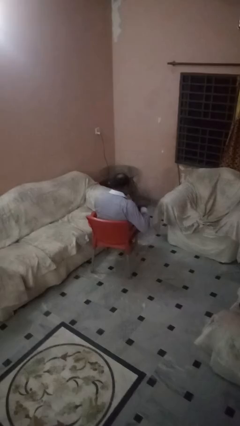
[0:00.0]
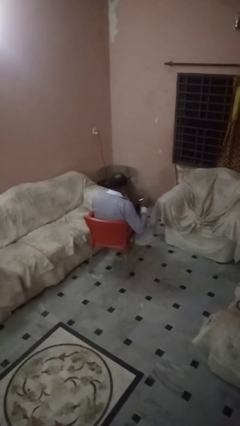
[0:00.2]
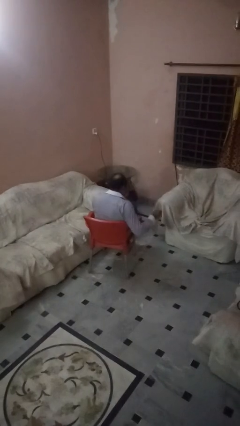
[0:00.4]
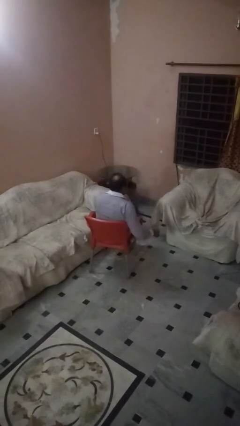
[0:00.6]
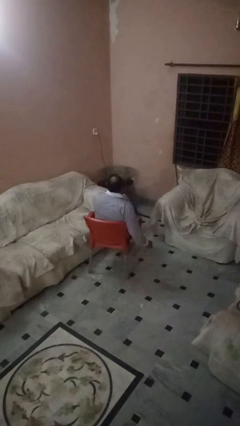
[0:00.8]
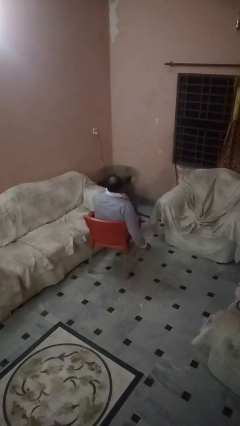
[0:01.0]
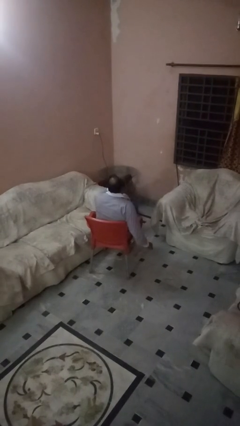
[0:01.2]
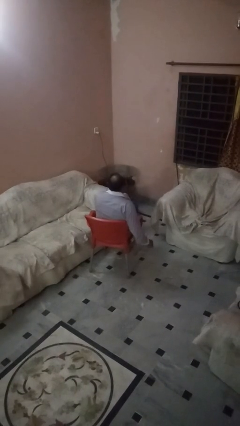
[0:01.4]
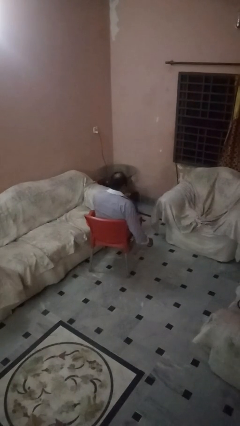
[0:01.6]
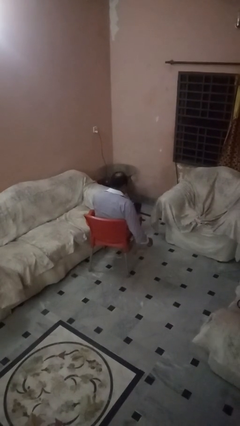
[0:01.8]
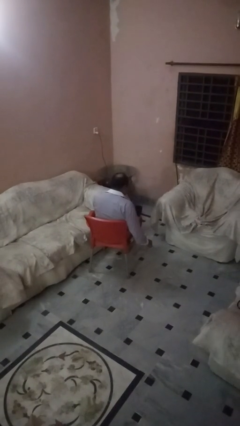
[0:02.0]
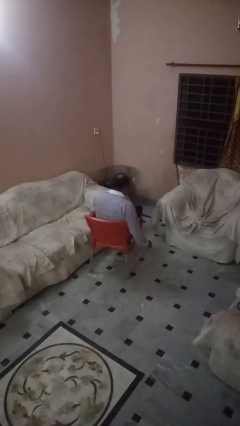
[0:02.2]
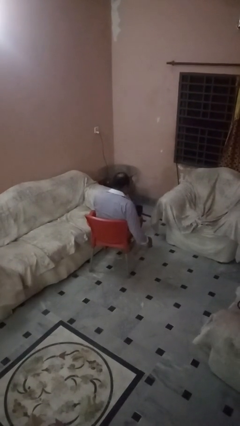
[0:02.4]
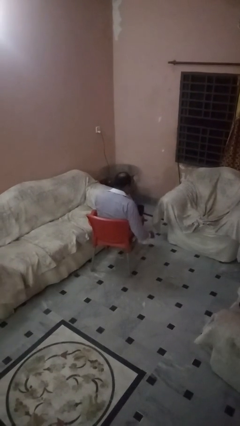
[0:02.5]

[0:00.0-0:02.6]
person drinks from mug

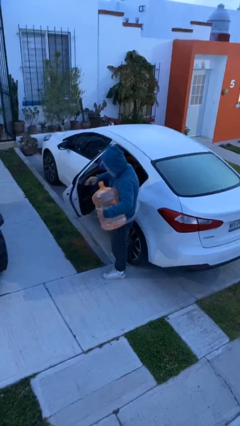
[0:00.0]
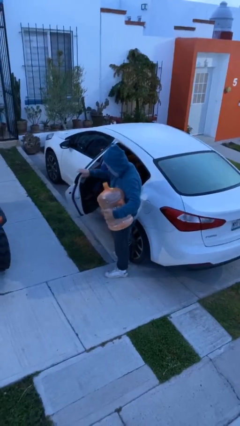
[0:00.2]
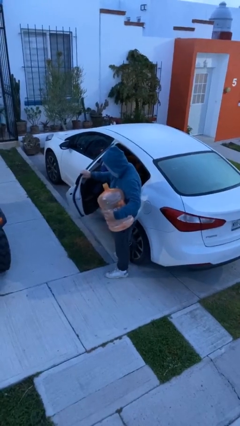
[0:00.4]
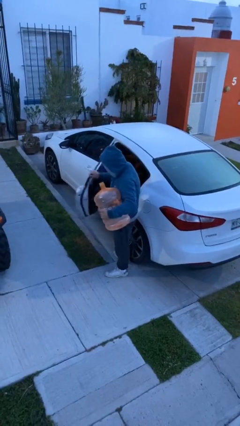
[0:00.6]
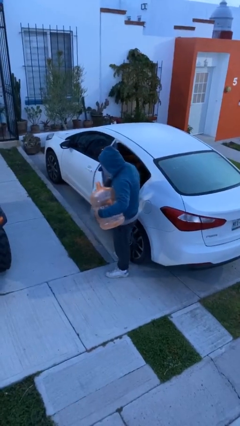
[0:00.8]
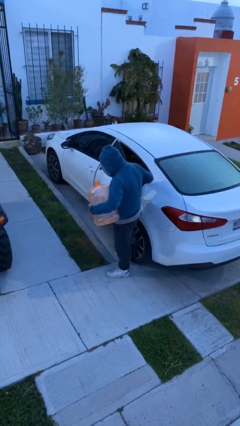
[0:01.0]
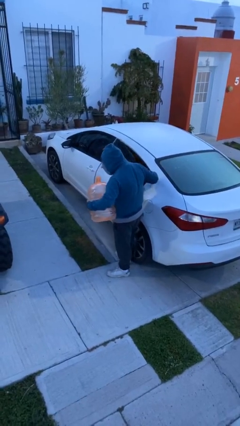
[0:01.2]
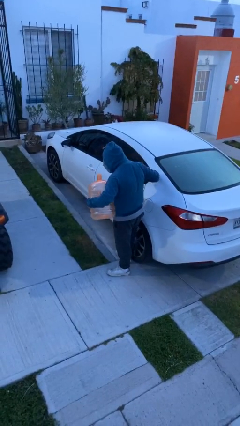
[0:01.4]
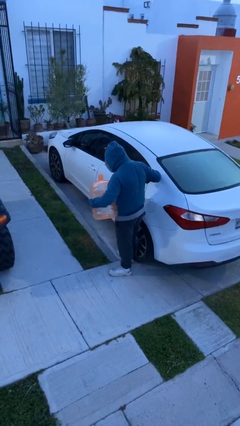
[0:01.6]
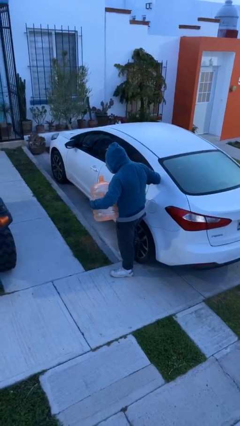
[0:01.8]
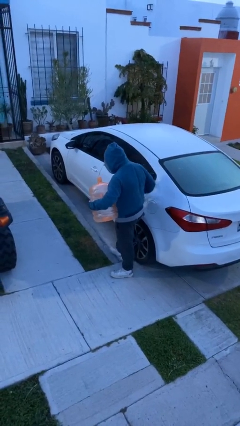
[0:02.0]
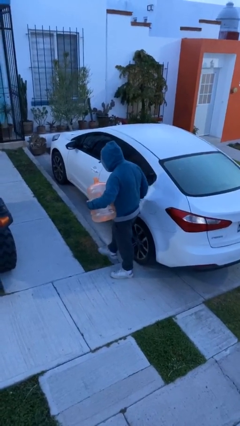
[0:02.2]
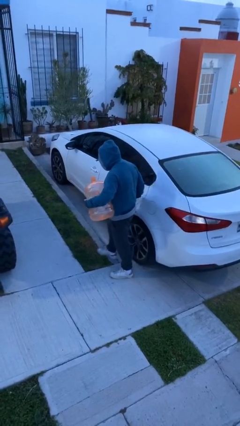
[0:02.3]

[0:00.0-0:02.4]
person closes car door

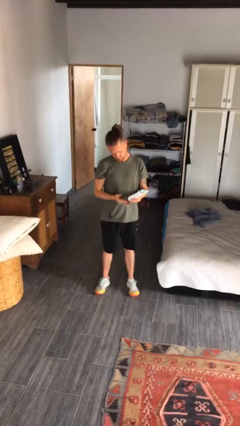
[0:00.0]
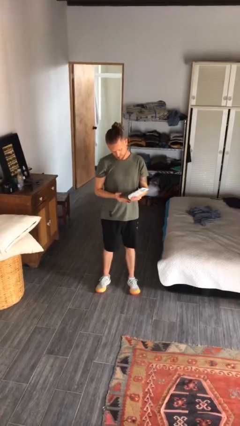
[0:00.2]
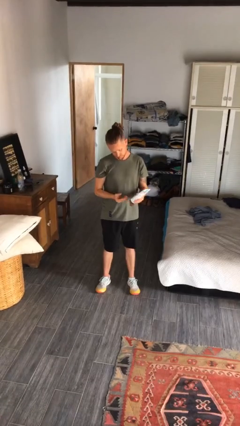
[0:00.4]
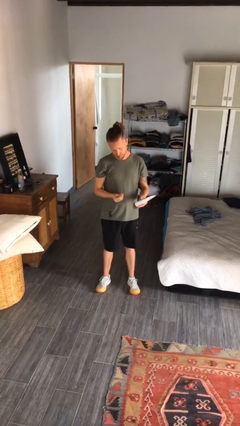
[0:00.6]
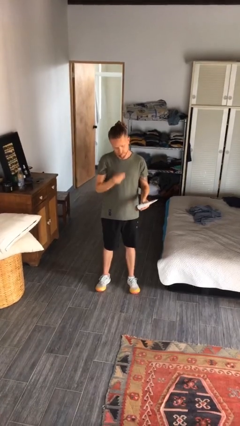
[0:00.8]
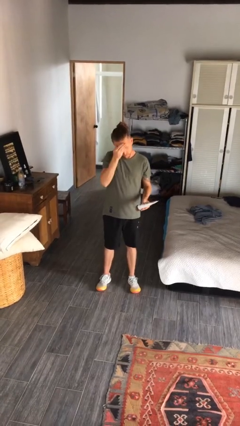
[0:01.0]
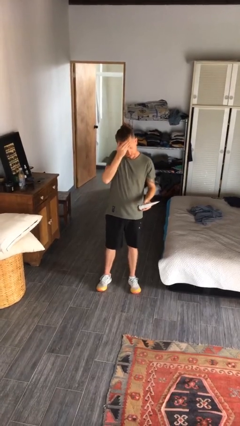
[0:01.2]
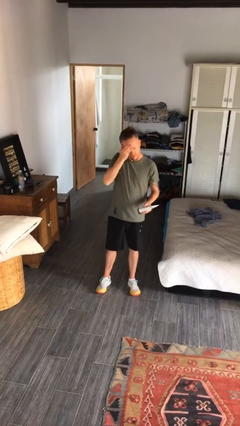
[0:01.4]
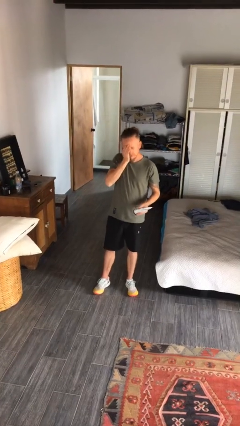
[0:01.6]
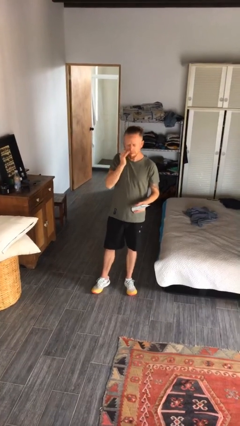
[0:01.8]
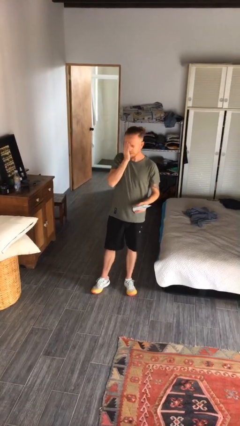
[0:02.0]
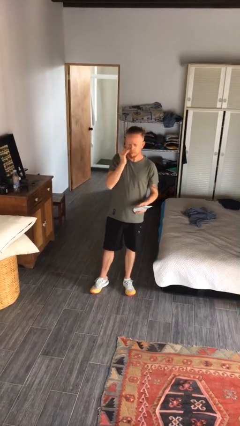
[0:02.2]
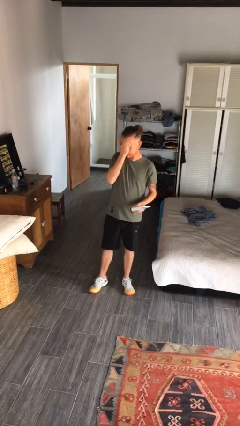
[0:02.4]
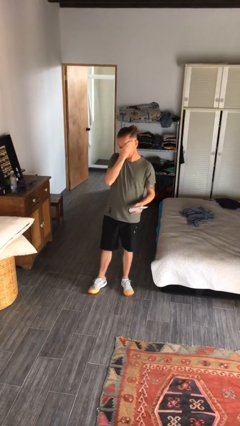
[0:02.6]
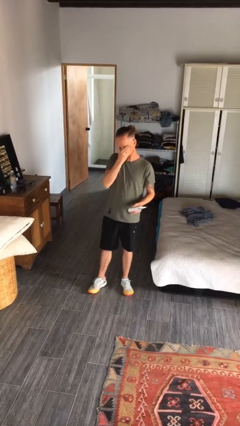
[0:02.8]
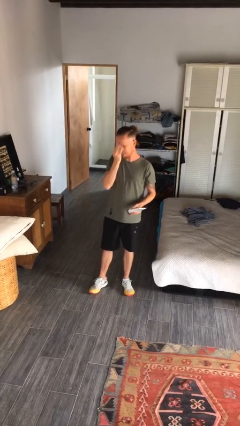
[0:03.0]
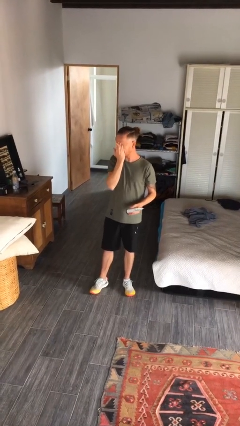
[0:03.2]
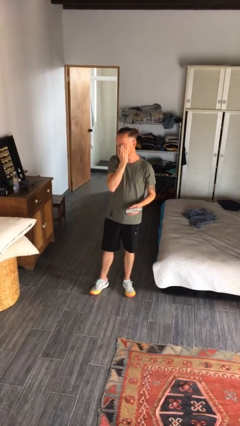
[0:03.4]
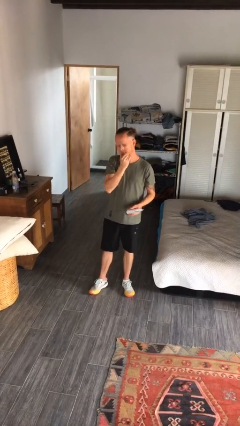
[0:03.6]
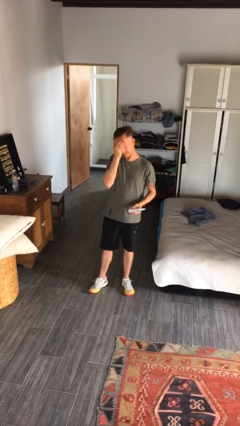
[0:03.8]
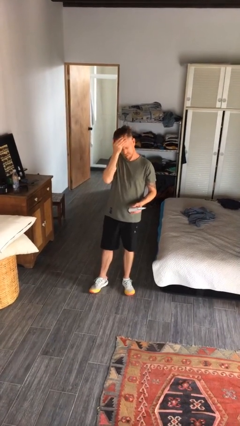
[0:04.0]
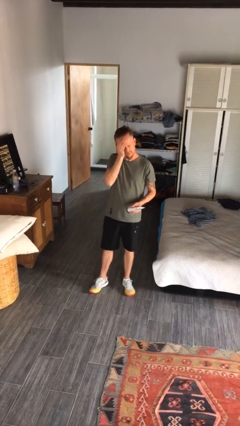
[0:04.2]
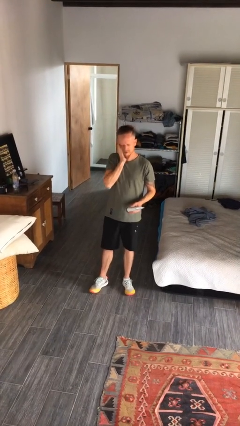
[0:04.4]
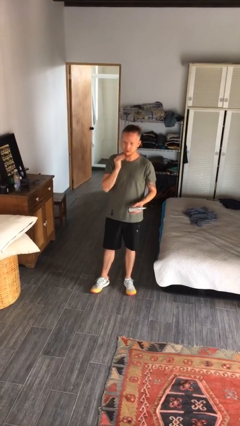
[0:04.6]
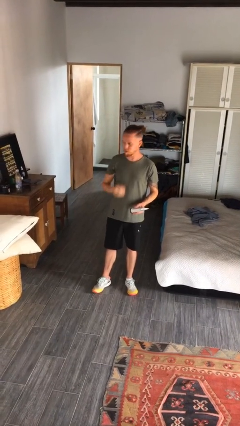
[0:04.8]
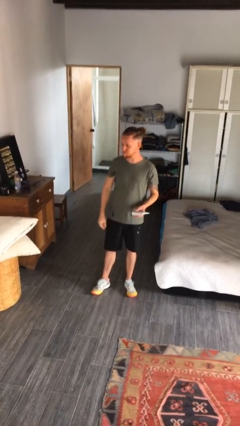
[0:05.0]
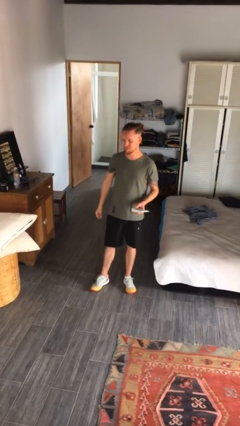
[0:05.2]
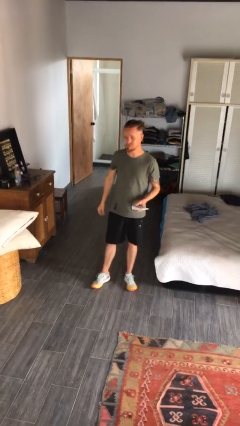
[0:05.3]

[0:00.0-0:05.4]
person applies sunscreen

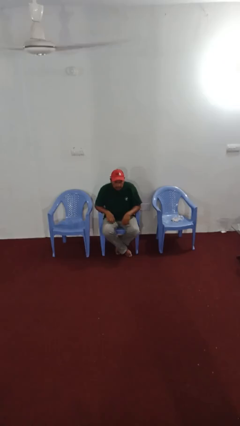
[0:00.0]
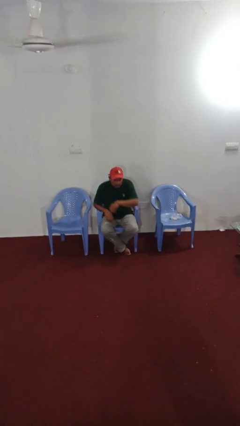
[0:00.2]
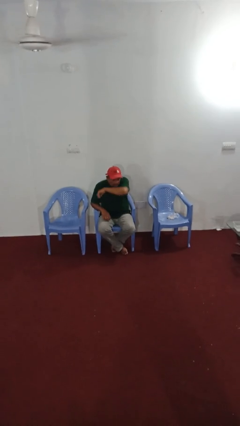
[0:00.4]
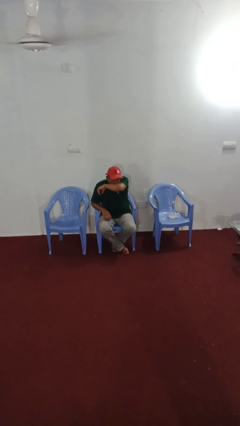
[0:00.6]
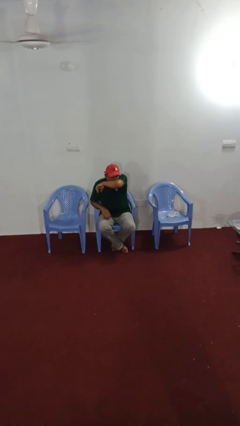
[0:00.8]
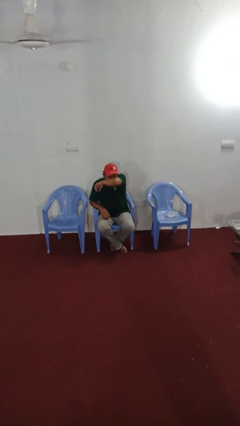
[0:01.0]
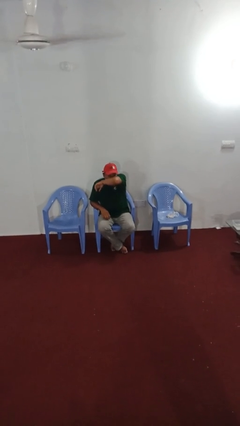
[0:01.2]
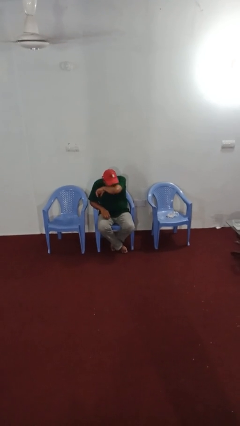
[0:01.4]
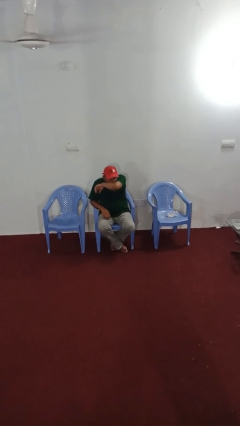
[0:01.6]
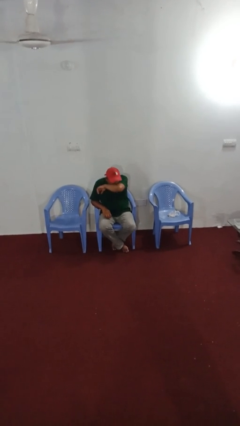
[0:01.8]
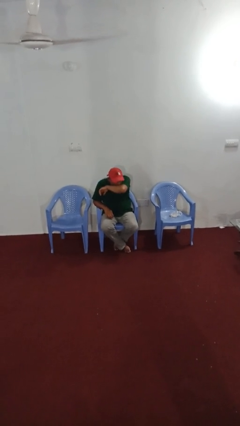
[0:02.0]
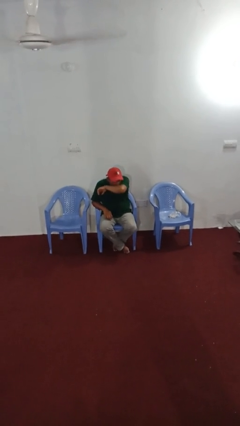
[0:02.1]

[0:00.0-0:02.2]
person sneezes into arm

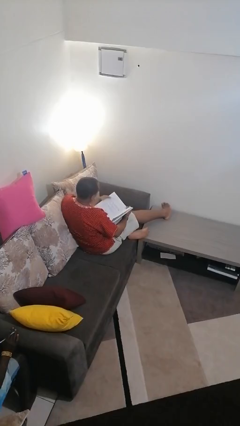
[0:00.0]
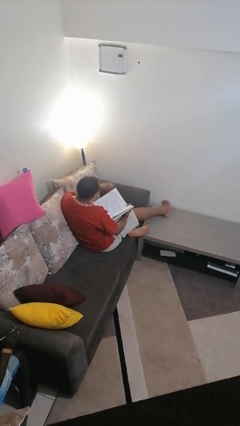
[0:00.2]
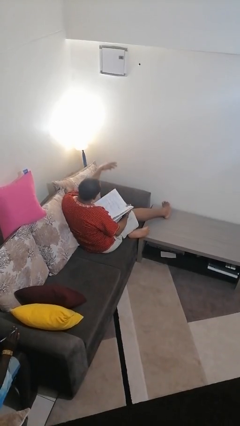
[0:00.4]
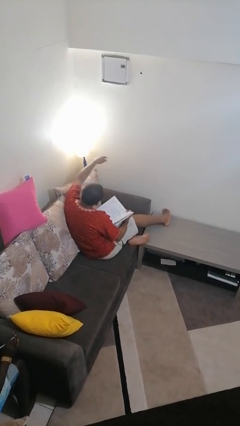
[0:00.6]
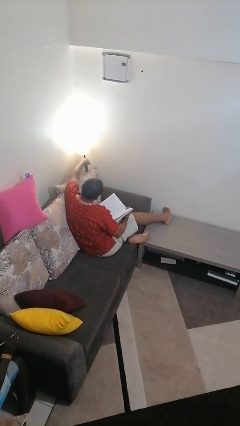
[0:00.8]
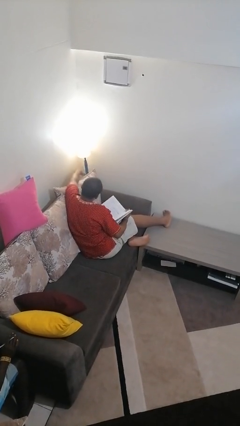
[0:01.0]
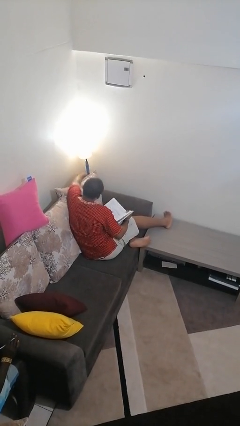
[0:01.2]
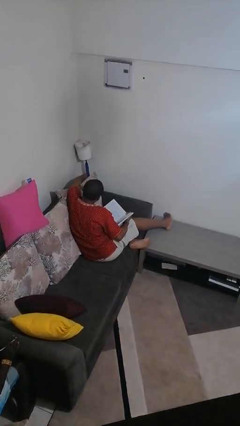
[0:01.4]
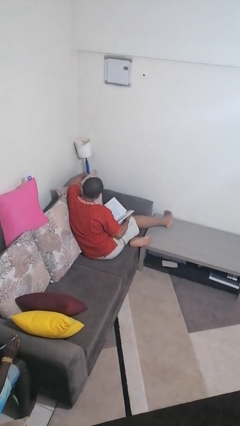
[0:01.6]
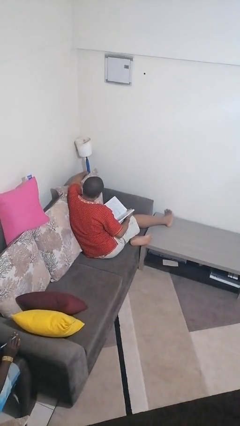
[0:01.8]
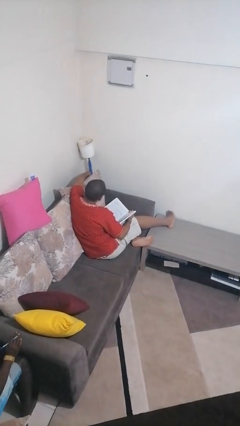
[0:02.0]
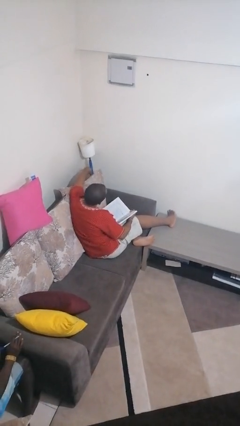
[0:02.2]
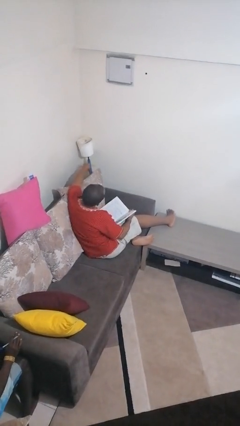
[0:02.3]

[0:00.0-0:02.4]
person turns off lamp

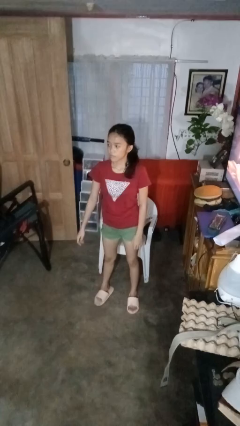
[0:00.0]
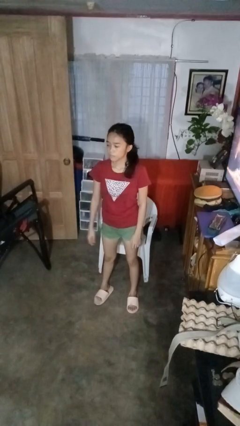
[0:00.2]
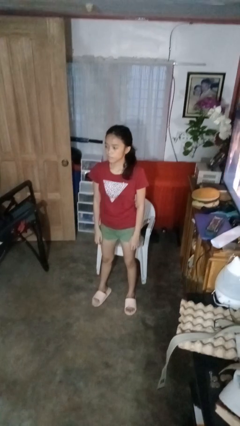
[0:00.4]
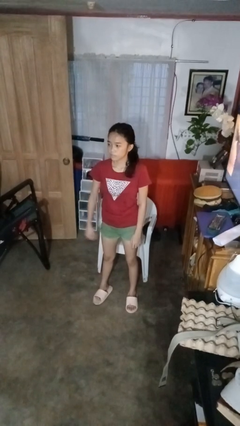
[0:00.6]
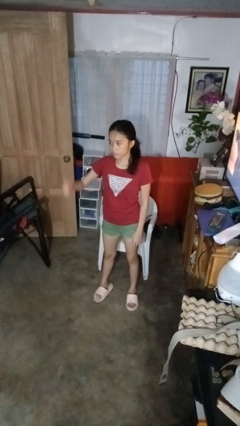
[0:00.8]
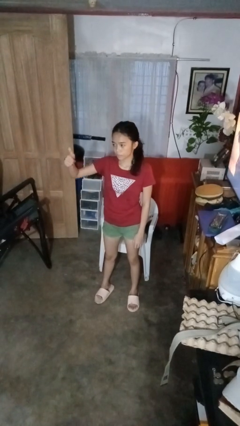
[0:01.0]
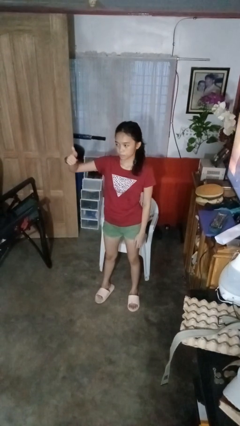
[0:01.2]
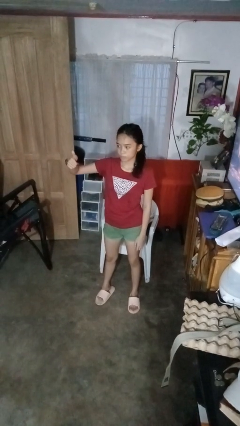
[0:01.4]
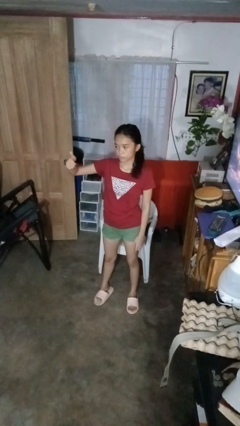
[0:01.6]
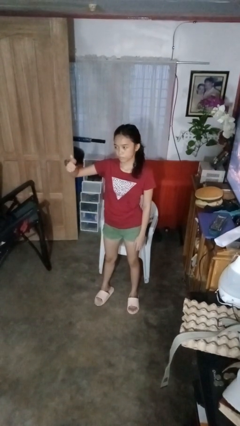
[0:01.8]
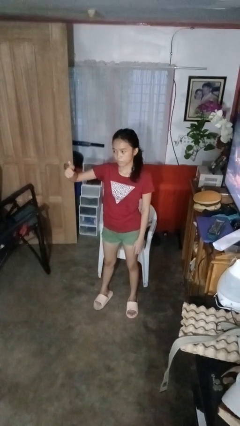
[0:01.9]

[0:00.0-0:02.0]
person gestures thumbs up

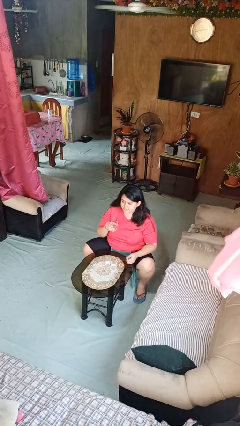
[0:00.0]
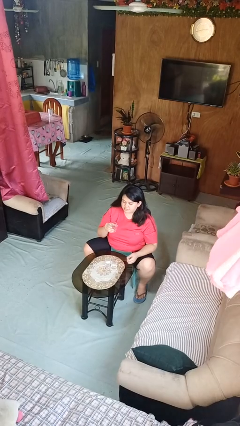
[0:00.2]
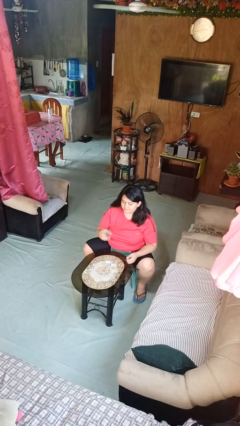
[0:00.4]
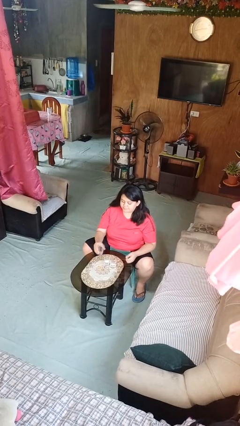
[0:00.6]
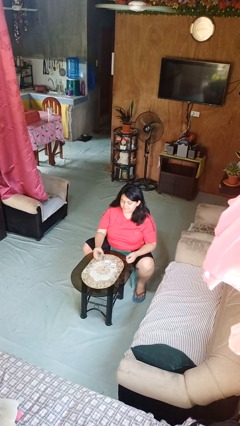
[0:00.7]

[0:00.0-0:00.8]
person puts down object on table
